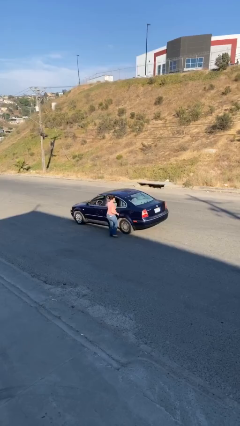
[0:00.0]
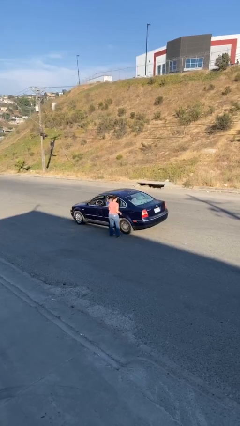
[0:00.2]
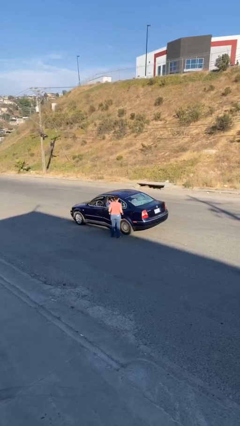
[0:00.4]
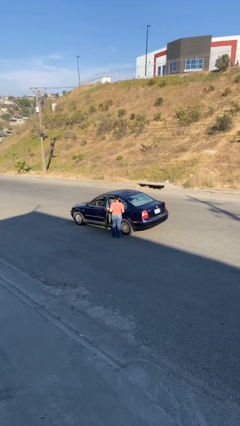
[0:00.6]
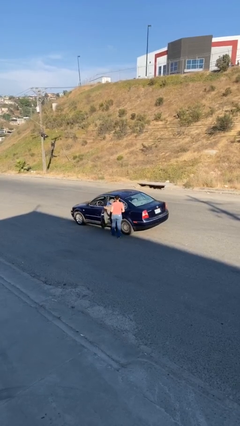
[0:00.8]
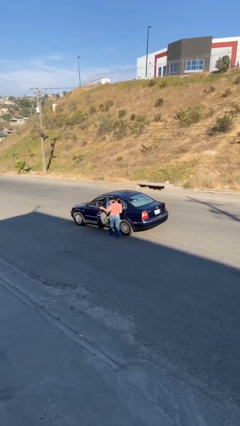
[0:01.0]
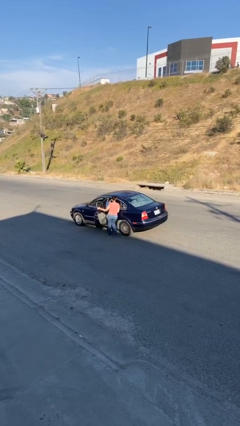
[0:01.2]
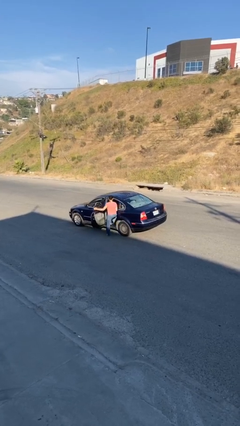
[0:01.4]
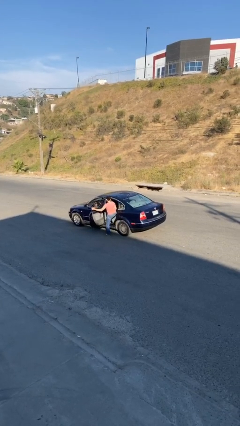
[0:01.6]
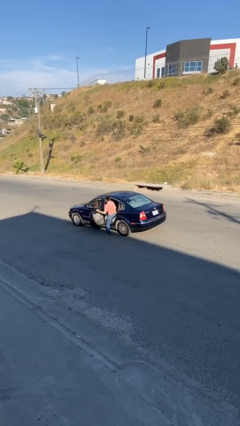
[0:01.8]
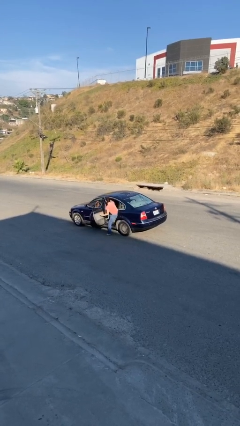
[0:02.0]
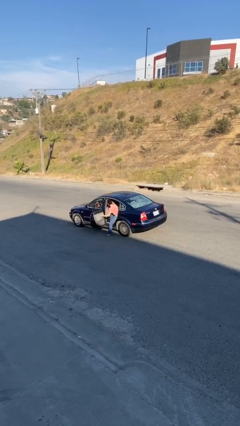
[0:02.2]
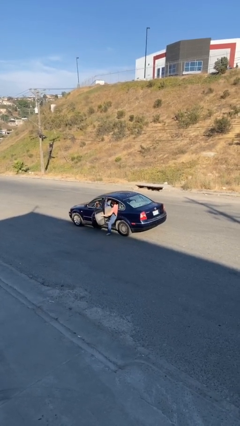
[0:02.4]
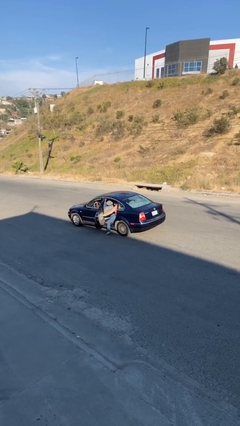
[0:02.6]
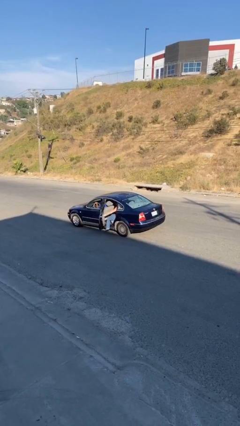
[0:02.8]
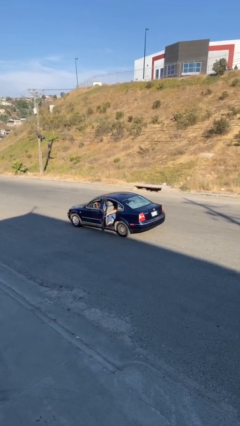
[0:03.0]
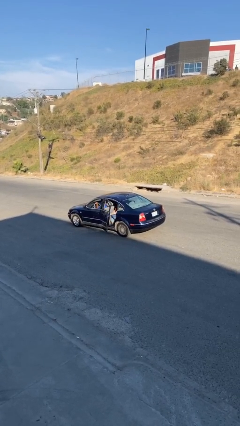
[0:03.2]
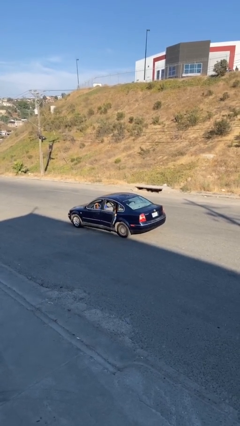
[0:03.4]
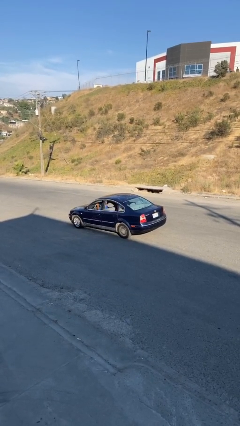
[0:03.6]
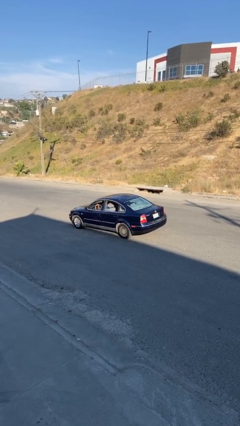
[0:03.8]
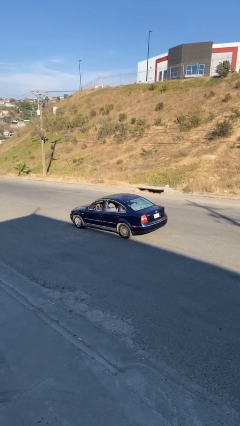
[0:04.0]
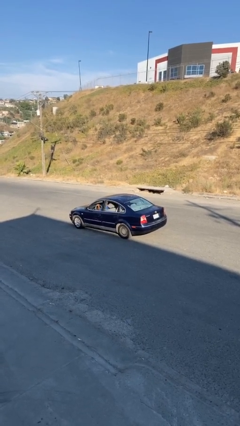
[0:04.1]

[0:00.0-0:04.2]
car picks up person

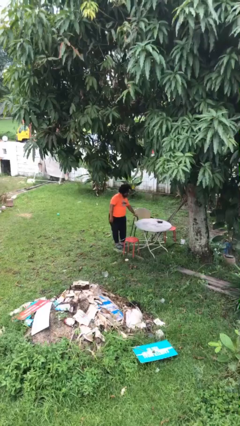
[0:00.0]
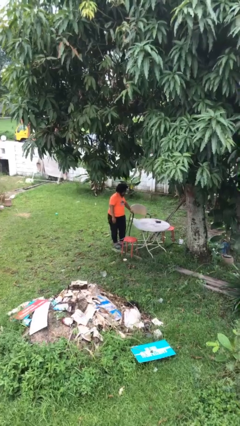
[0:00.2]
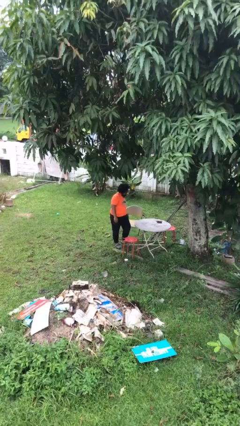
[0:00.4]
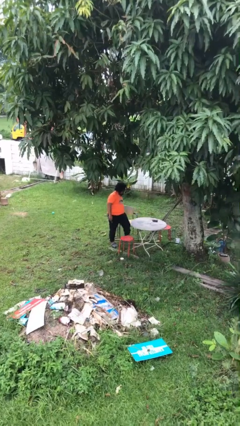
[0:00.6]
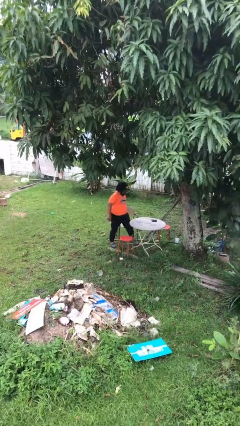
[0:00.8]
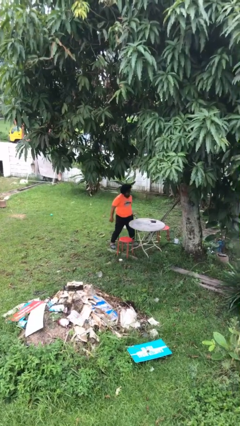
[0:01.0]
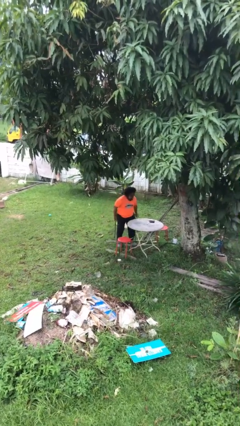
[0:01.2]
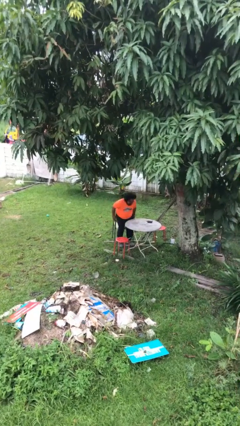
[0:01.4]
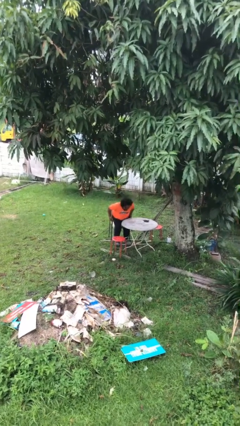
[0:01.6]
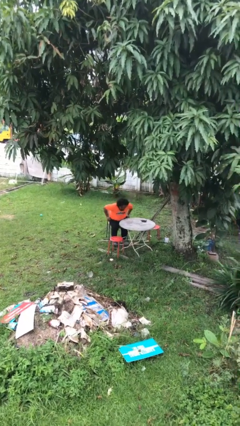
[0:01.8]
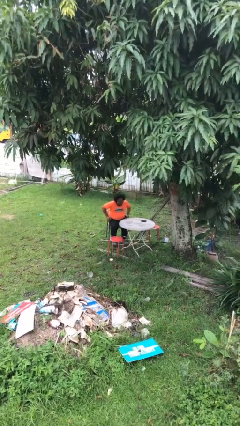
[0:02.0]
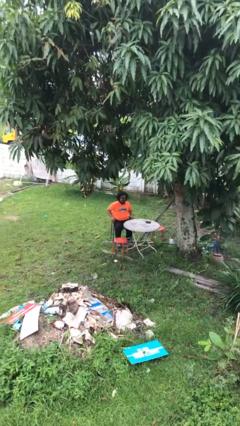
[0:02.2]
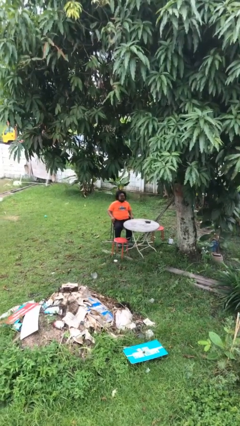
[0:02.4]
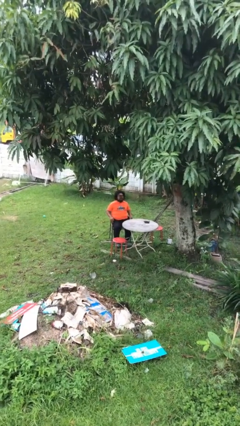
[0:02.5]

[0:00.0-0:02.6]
person sits down

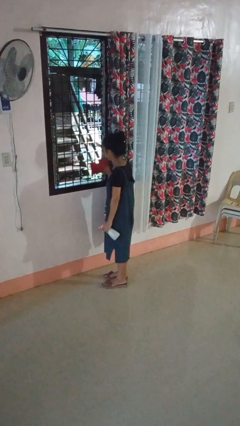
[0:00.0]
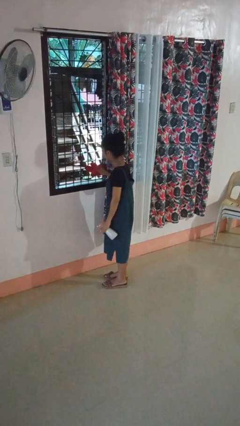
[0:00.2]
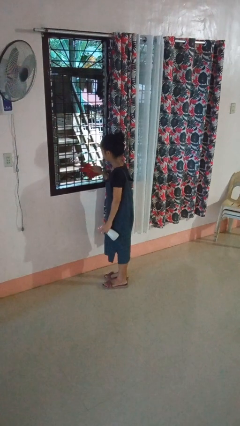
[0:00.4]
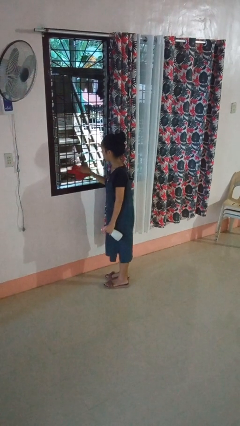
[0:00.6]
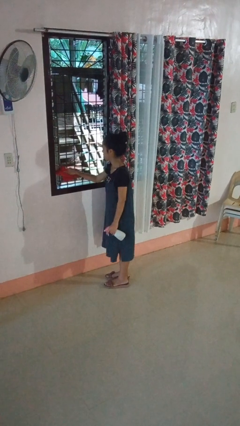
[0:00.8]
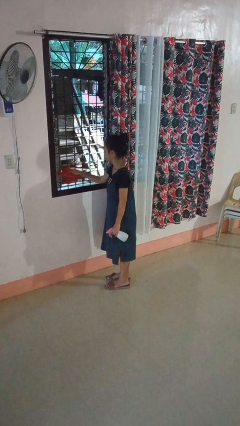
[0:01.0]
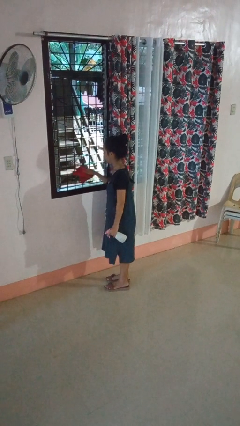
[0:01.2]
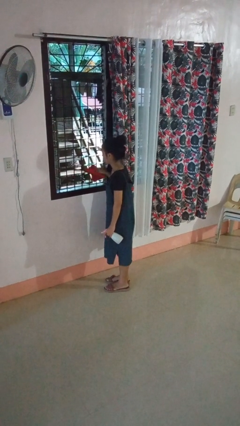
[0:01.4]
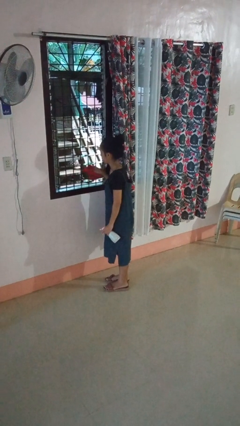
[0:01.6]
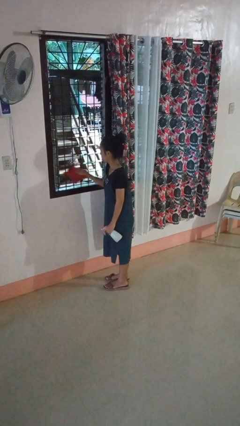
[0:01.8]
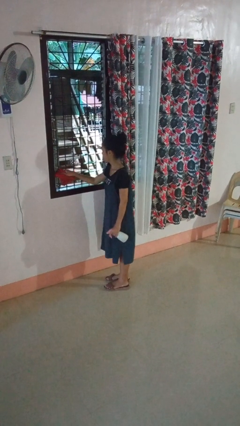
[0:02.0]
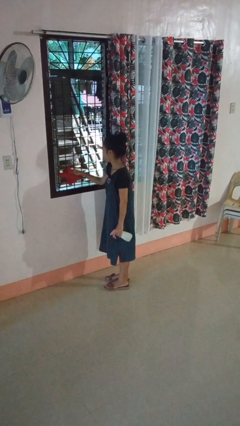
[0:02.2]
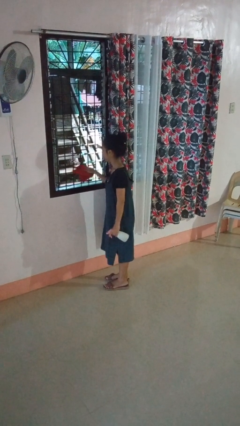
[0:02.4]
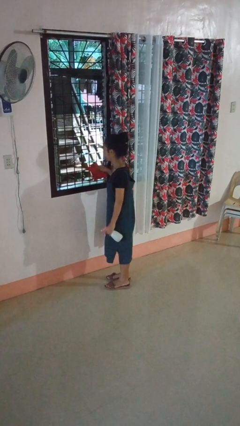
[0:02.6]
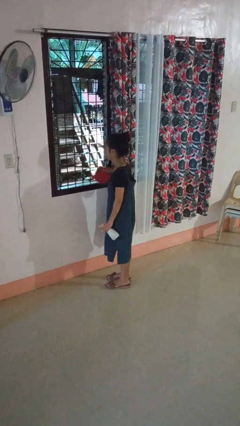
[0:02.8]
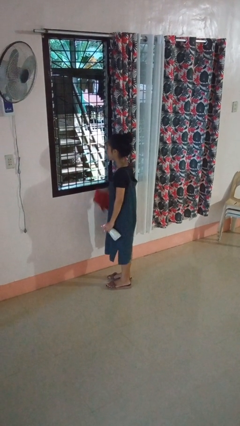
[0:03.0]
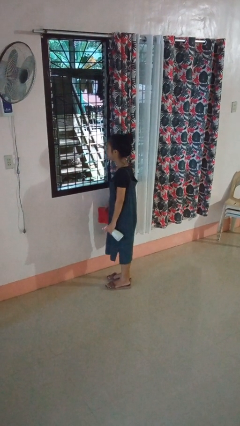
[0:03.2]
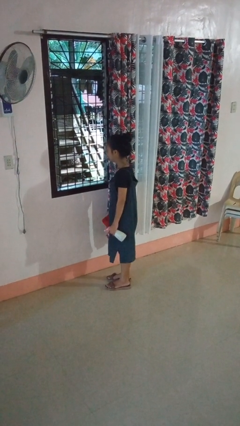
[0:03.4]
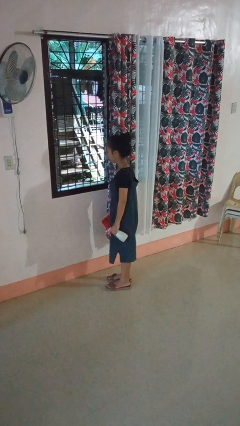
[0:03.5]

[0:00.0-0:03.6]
person washes window

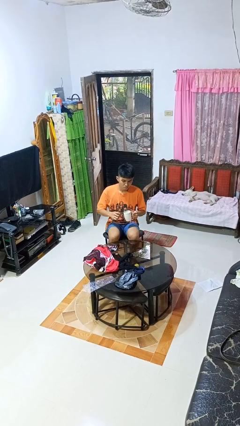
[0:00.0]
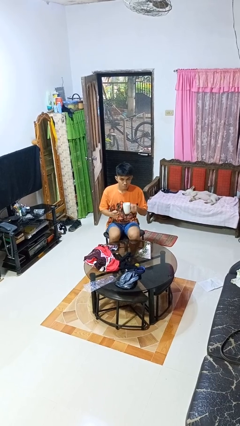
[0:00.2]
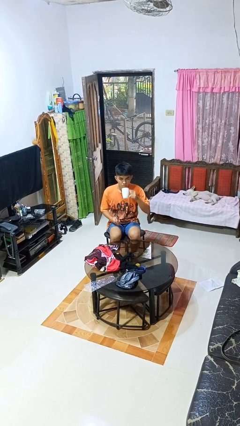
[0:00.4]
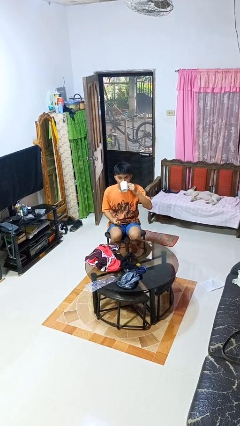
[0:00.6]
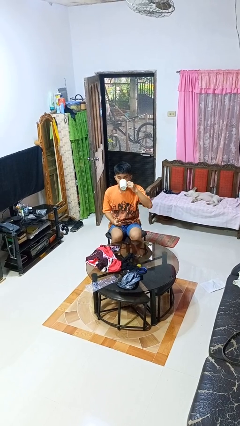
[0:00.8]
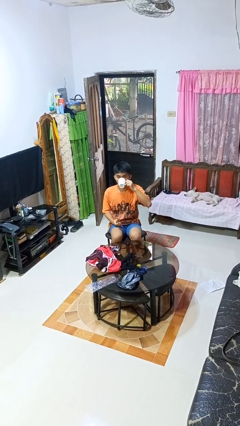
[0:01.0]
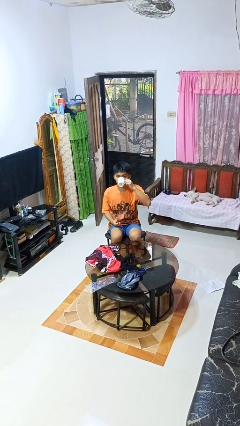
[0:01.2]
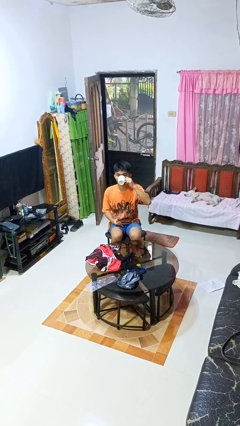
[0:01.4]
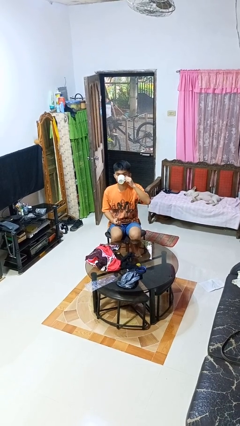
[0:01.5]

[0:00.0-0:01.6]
person drinks from mug

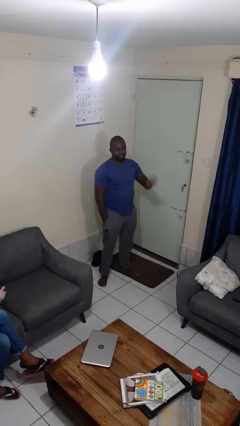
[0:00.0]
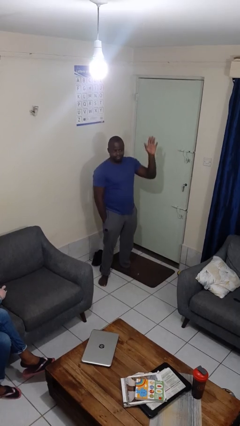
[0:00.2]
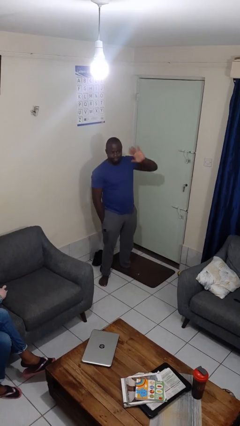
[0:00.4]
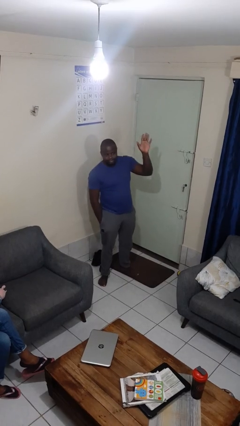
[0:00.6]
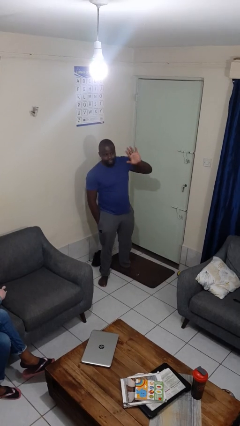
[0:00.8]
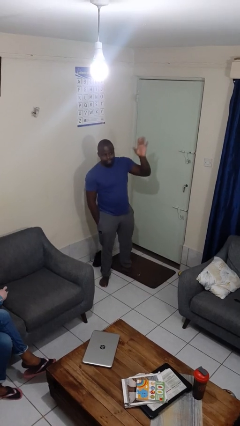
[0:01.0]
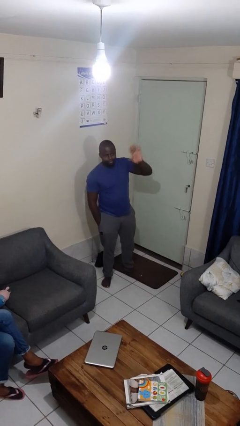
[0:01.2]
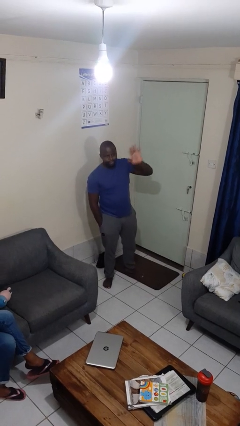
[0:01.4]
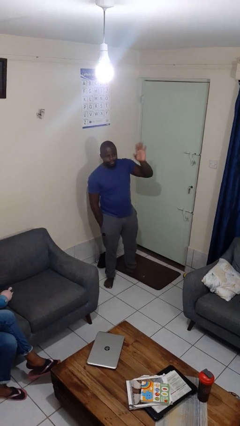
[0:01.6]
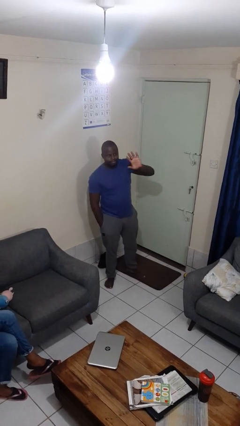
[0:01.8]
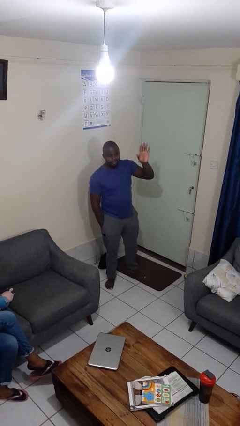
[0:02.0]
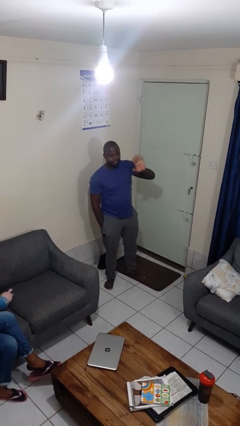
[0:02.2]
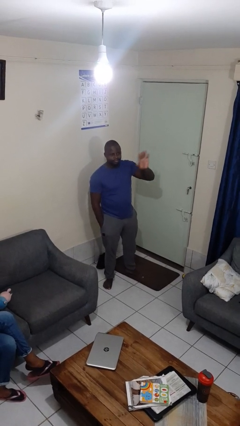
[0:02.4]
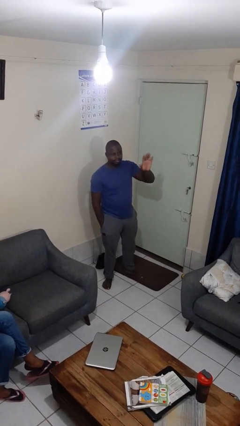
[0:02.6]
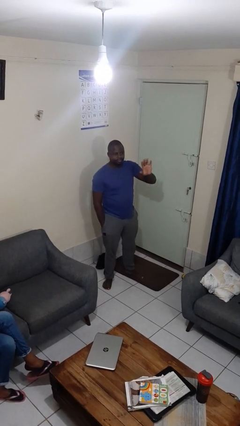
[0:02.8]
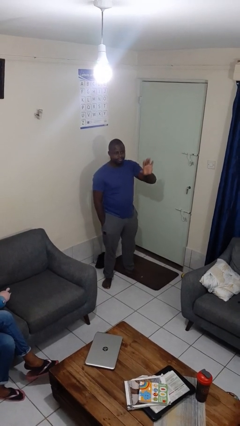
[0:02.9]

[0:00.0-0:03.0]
person waves at person

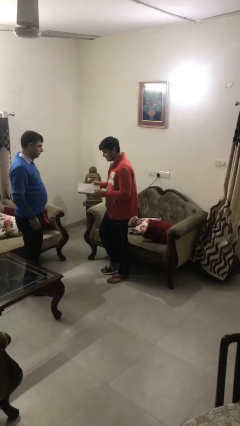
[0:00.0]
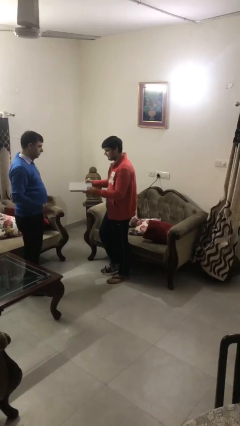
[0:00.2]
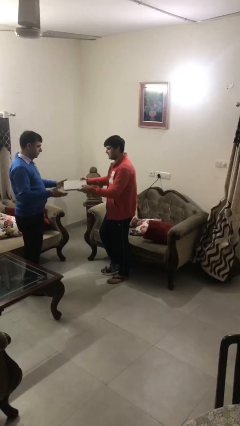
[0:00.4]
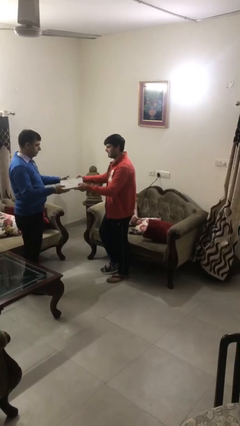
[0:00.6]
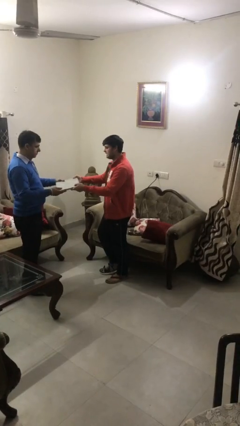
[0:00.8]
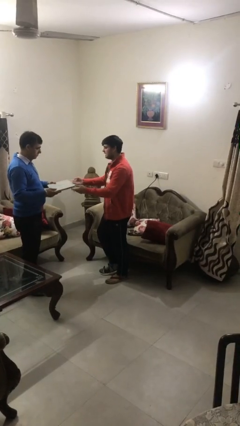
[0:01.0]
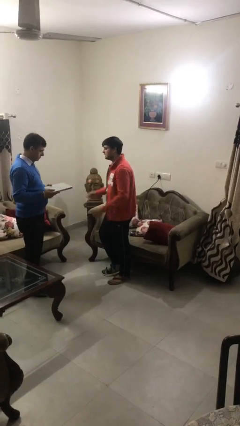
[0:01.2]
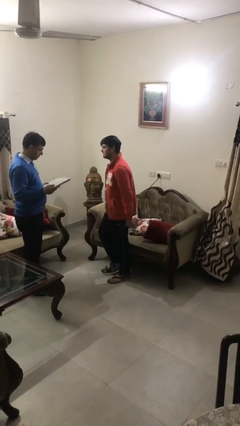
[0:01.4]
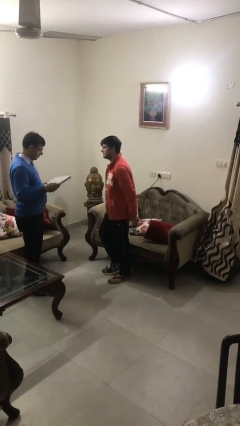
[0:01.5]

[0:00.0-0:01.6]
person transfers object to person

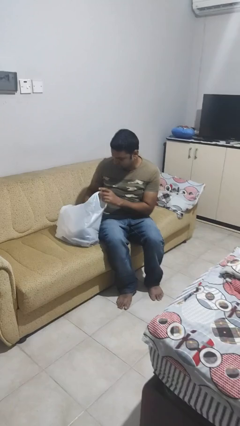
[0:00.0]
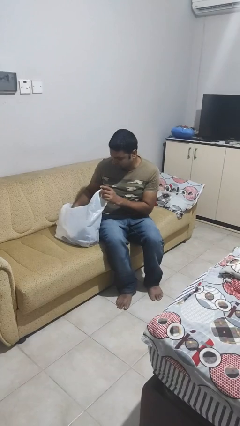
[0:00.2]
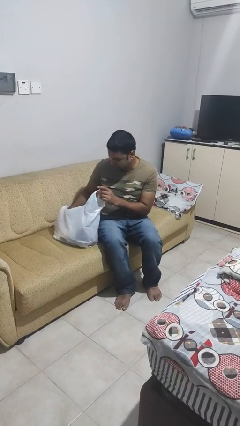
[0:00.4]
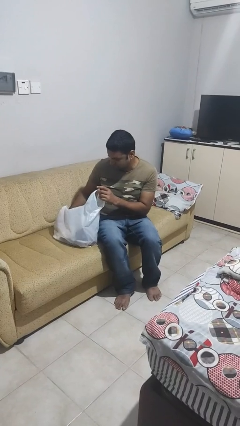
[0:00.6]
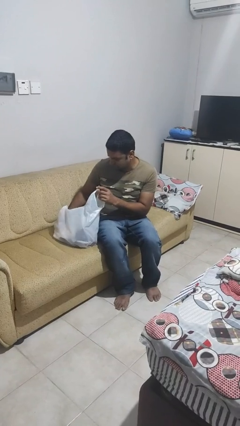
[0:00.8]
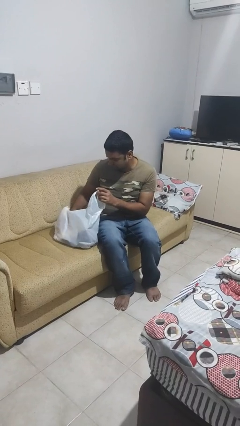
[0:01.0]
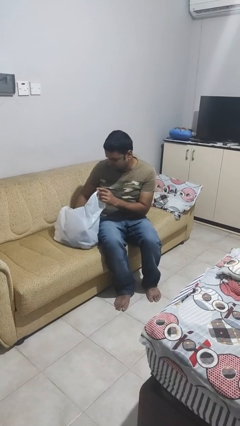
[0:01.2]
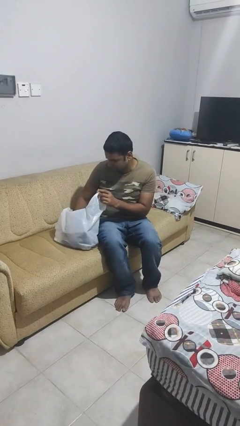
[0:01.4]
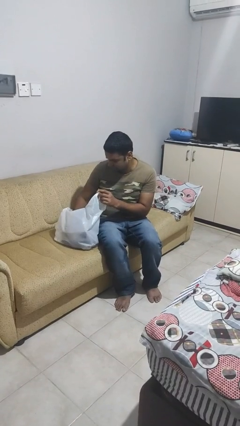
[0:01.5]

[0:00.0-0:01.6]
person searches in bag
